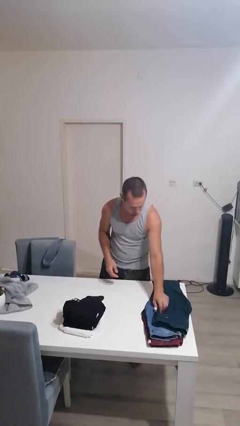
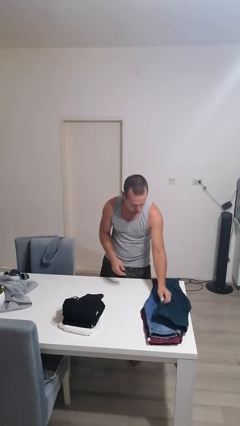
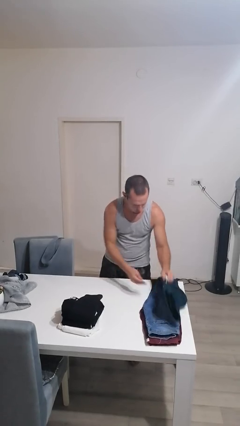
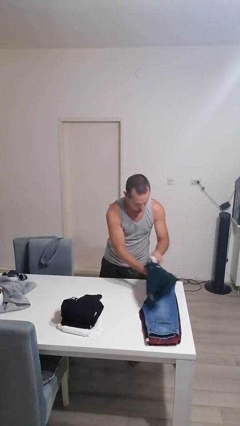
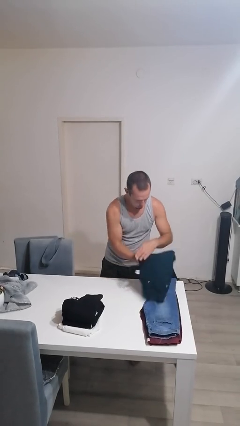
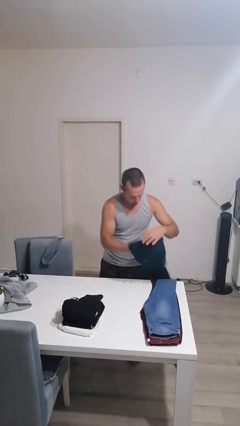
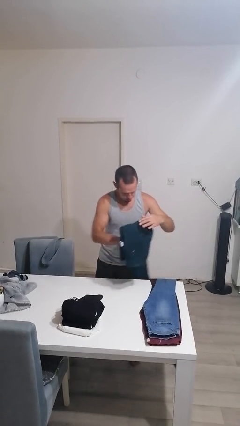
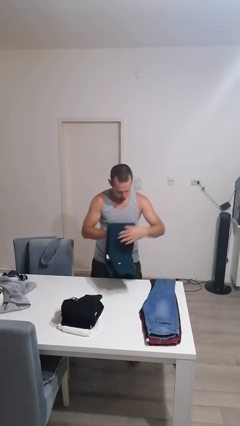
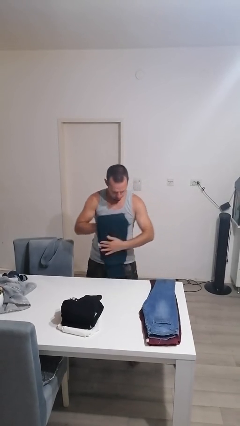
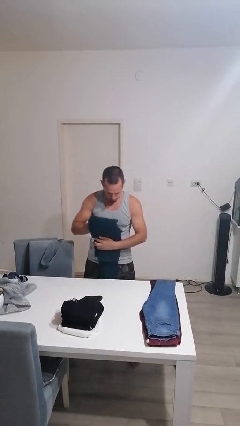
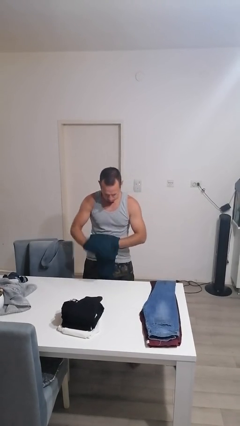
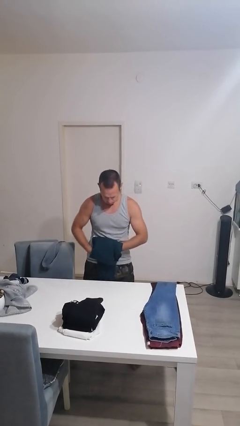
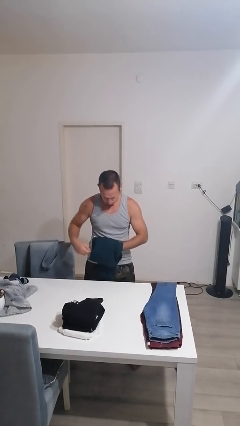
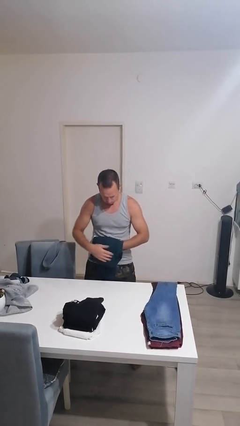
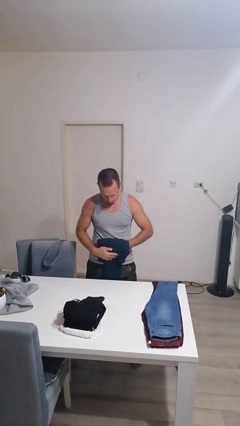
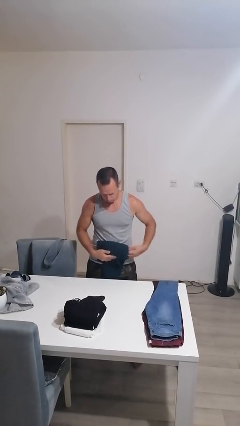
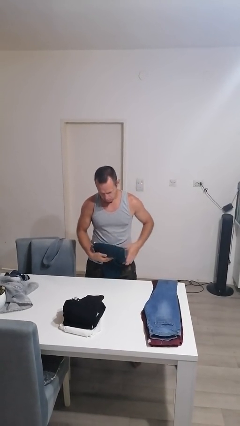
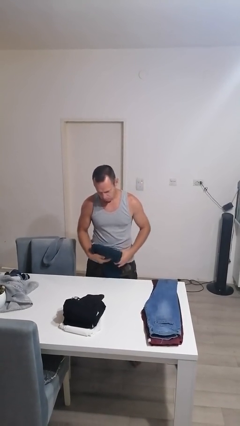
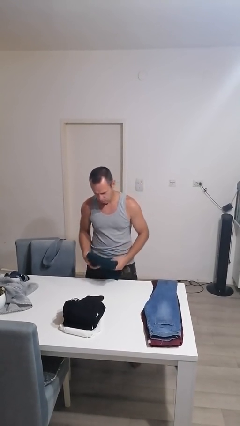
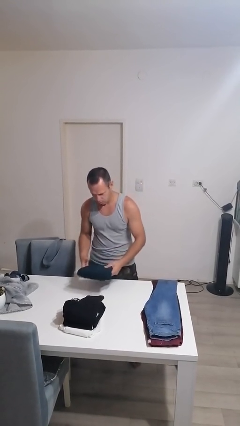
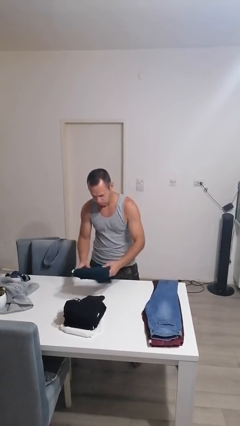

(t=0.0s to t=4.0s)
person folds pants

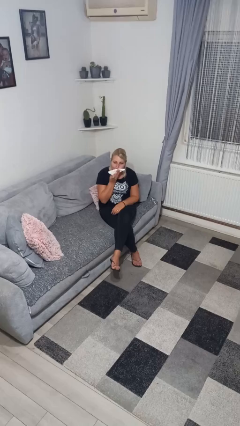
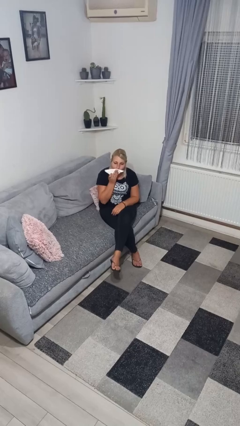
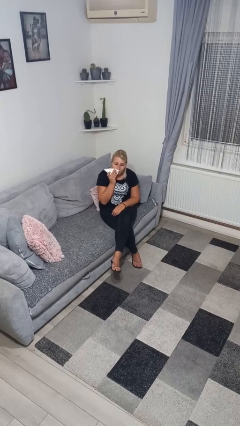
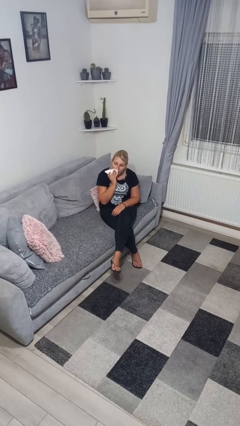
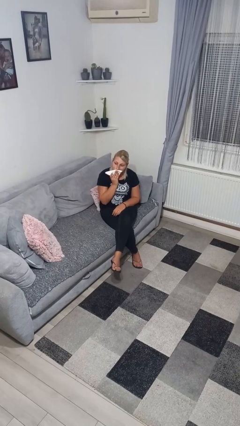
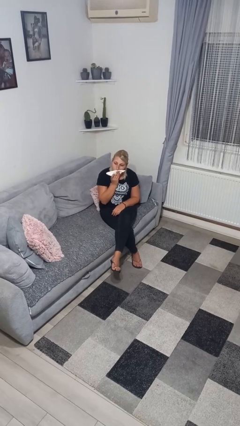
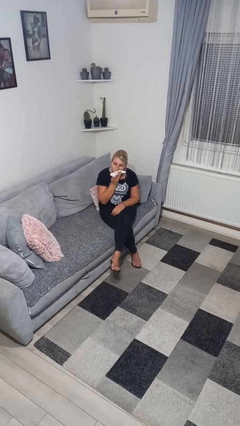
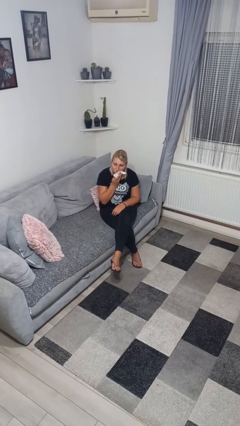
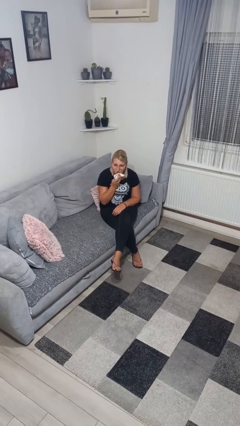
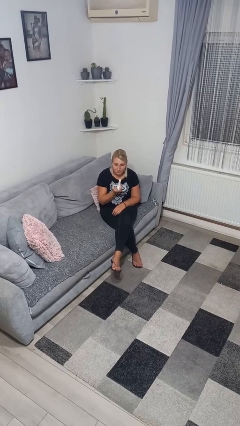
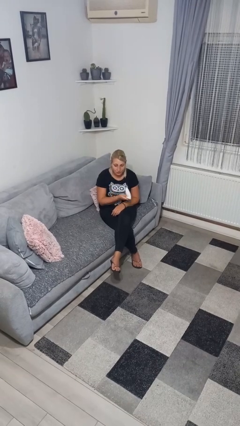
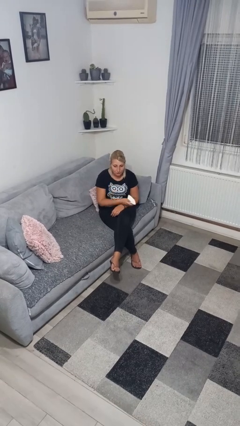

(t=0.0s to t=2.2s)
person wipes mouth with napkin

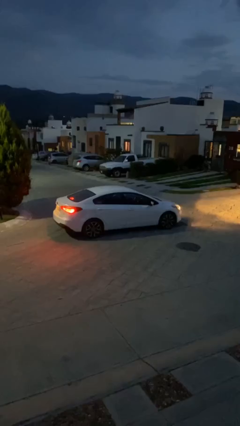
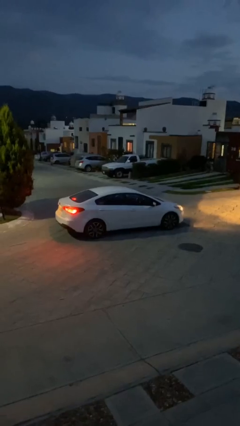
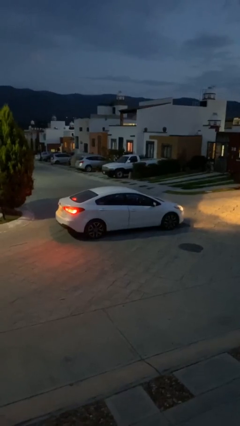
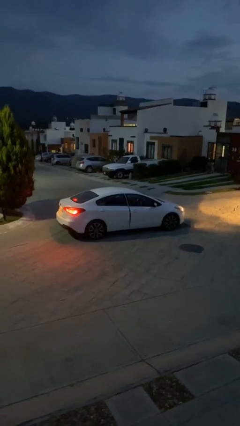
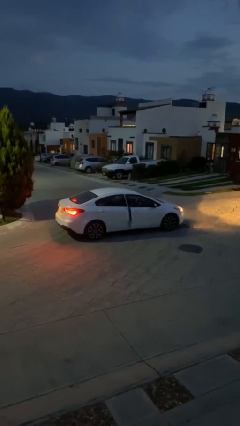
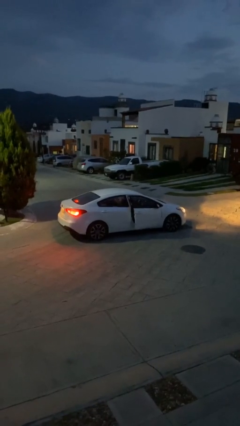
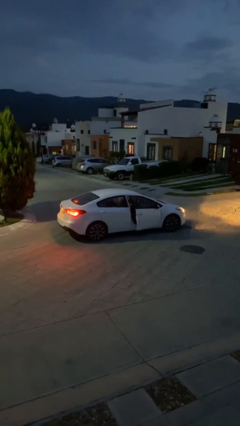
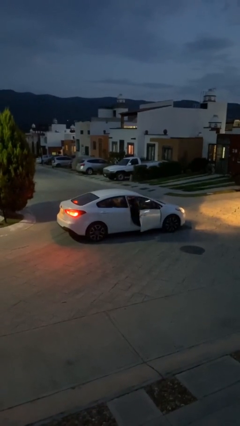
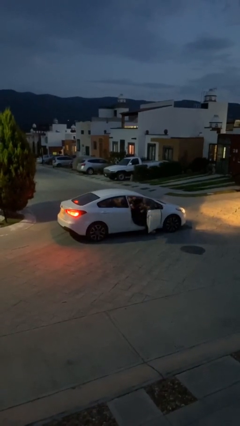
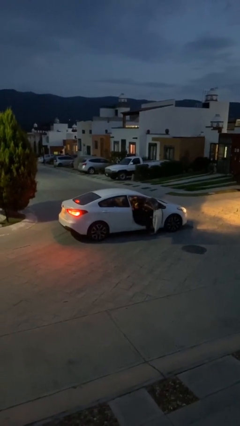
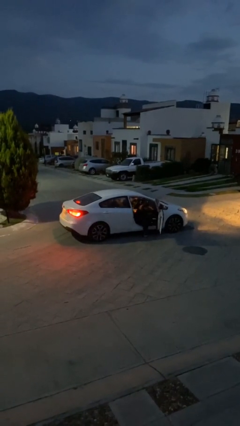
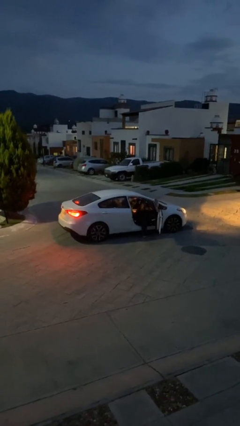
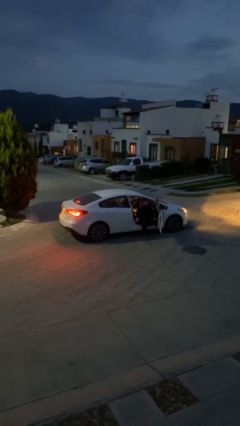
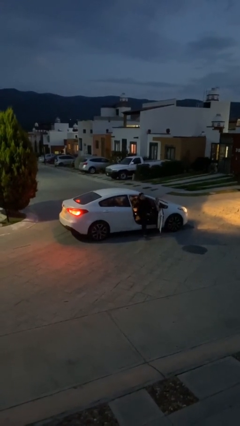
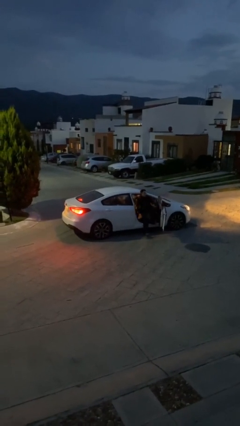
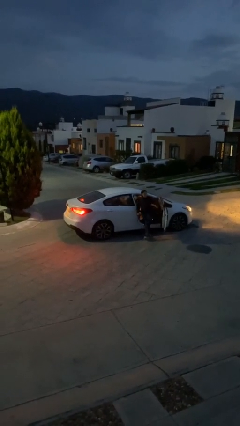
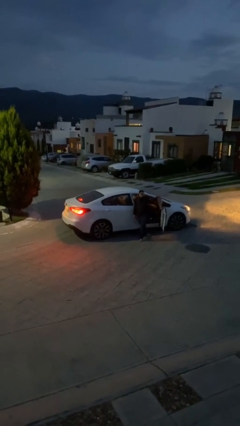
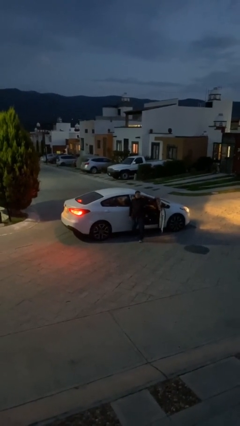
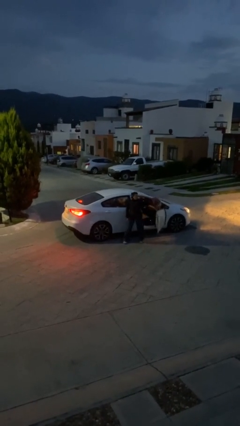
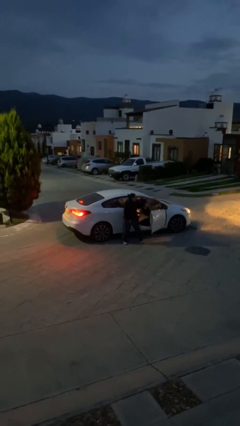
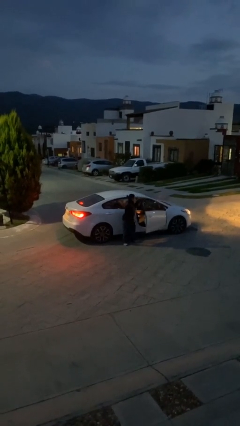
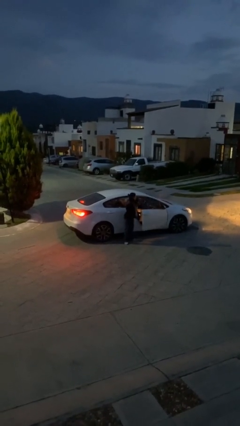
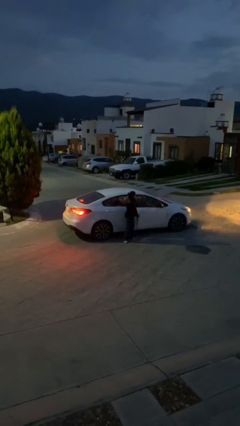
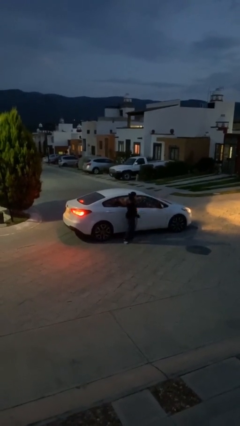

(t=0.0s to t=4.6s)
car drops off person

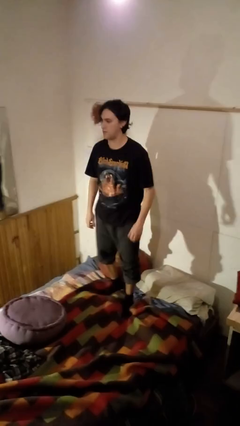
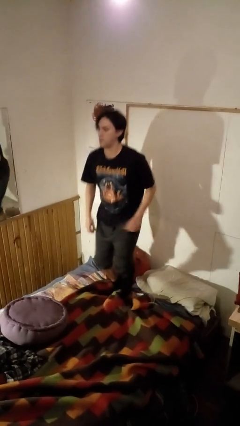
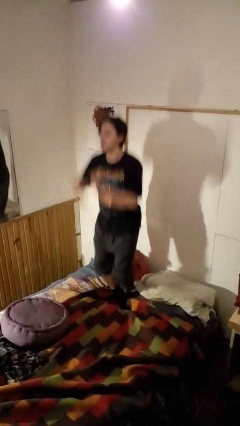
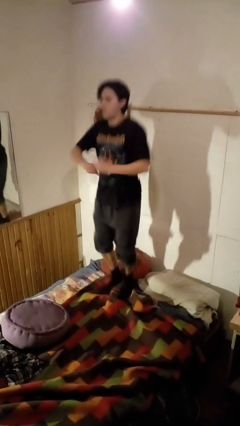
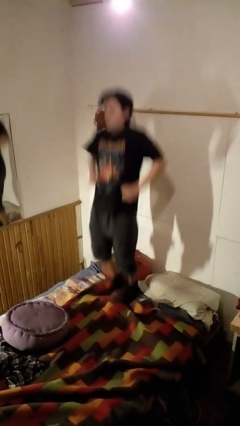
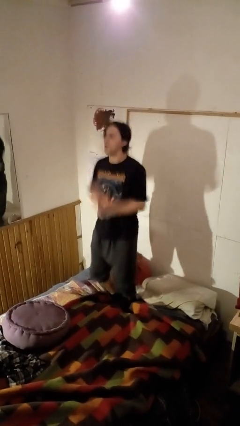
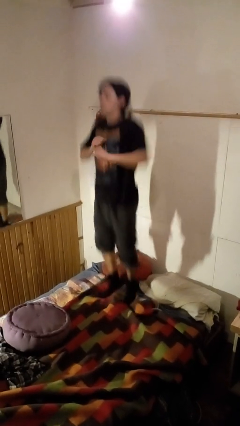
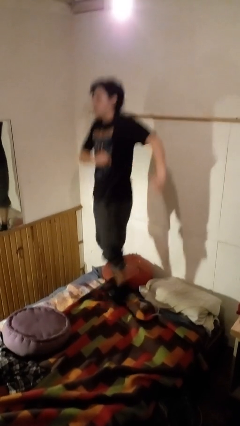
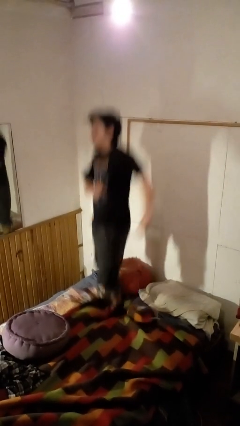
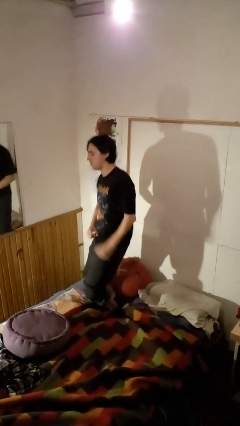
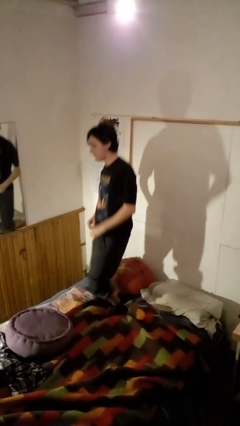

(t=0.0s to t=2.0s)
person jumps on bed

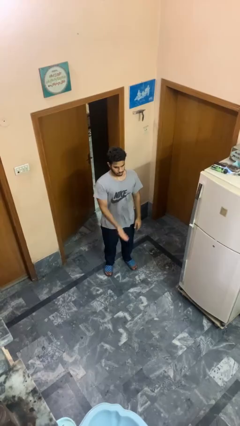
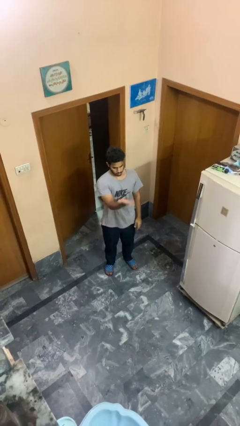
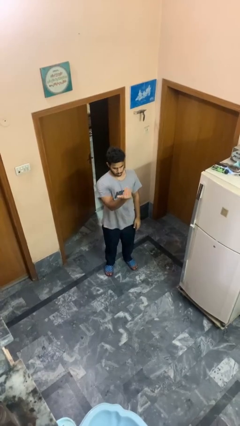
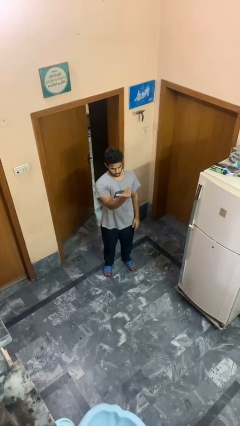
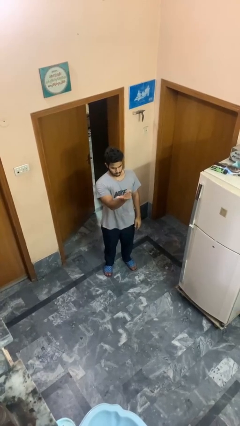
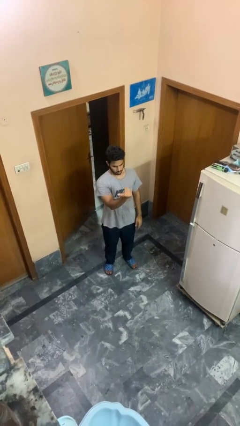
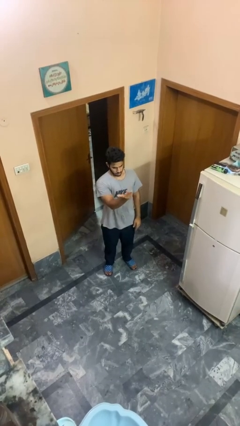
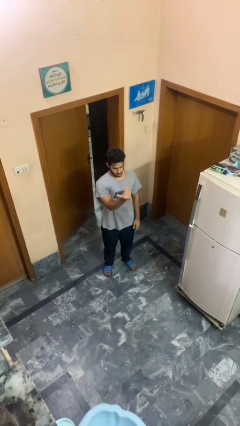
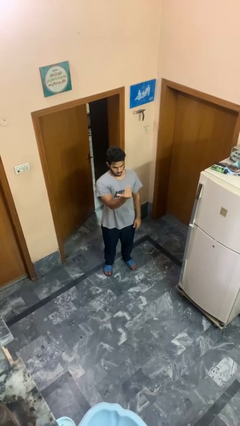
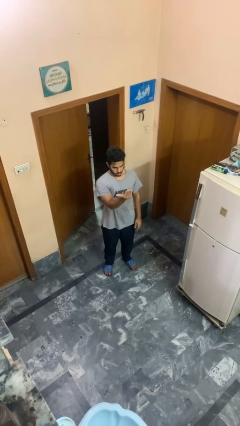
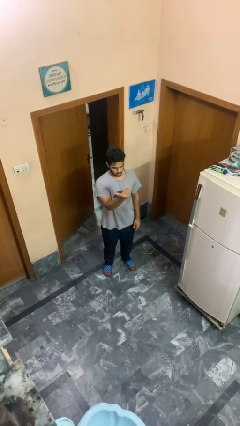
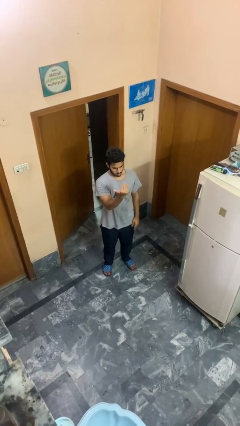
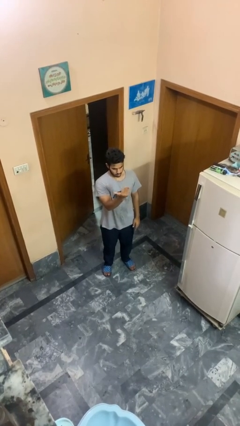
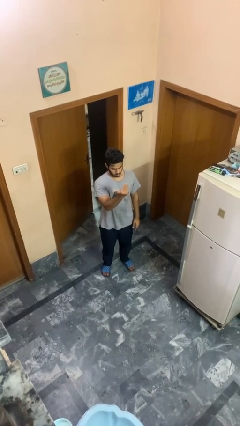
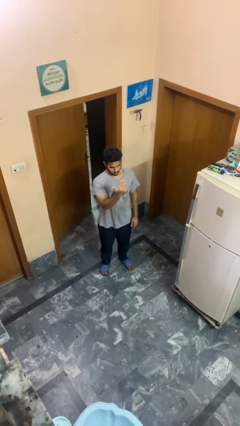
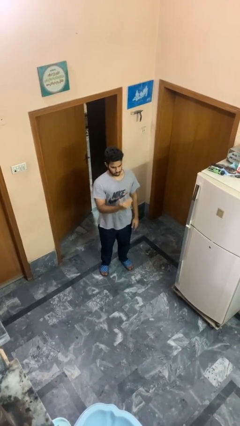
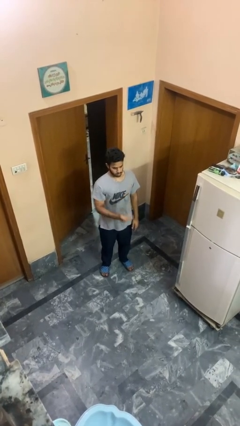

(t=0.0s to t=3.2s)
person gestures come here

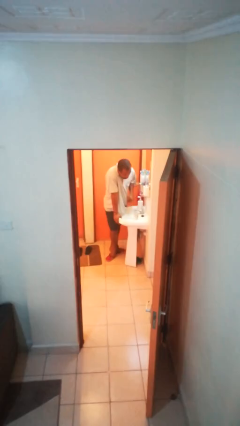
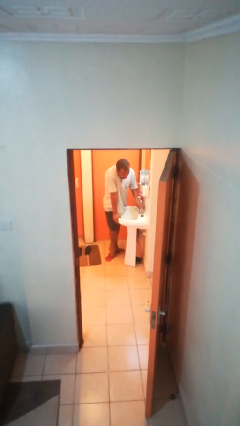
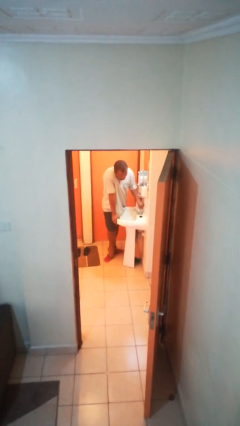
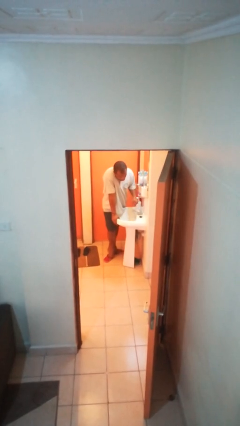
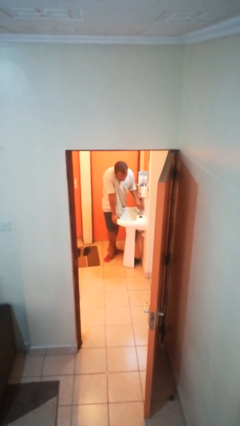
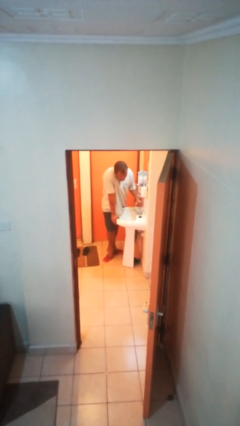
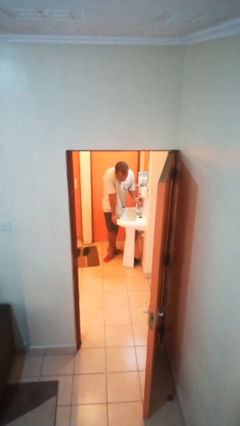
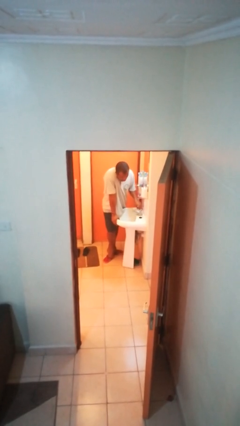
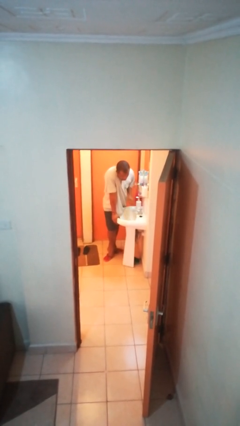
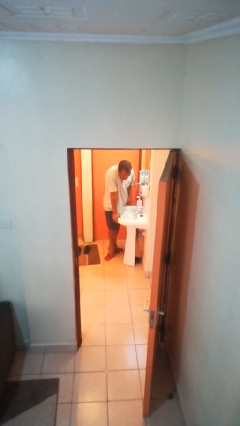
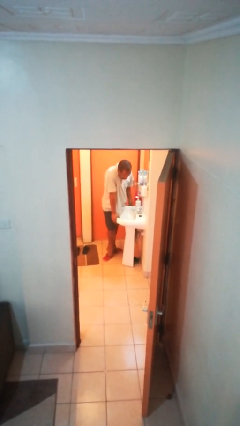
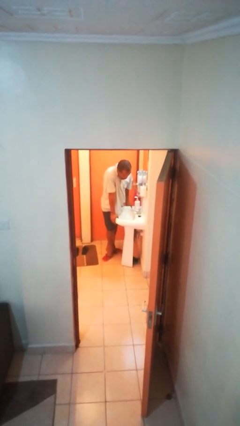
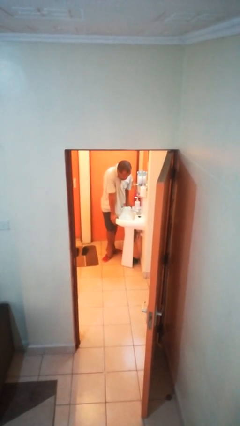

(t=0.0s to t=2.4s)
person turns on faucet
